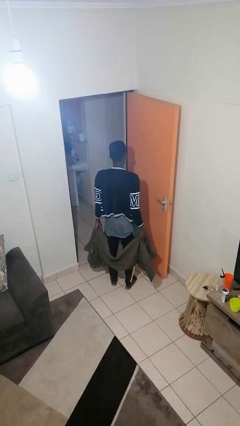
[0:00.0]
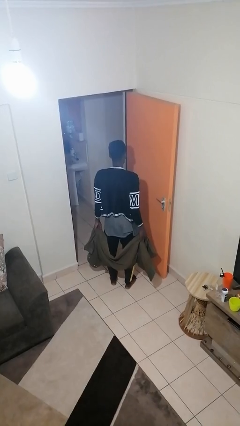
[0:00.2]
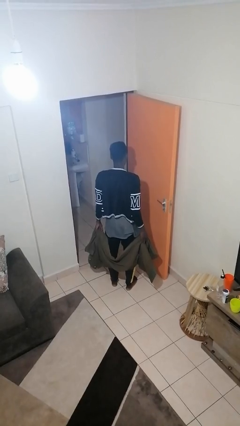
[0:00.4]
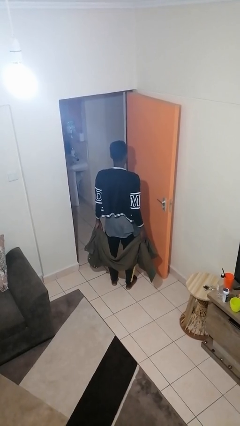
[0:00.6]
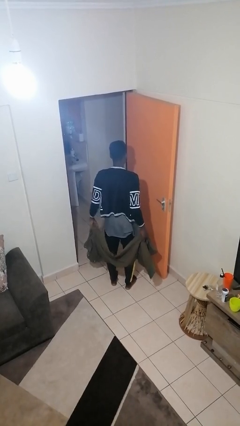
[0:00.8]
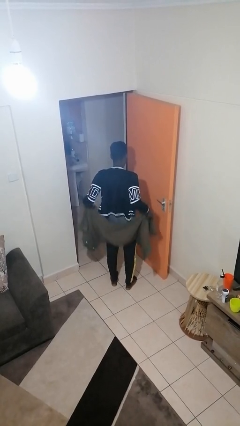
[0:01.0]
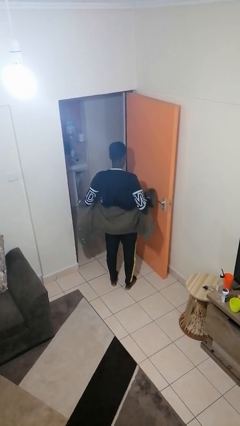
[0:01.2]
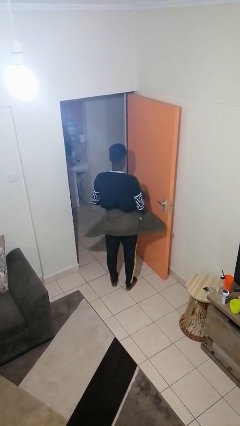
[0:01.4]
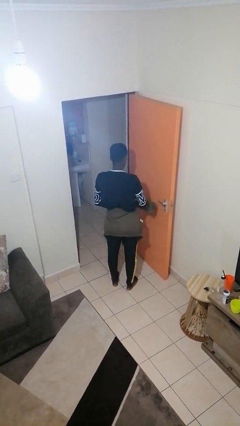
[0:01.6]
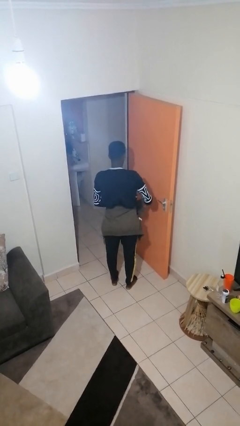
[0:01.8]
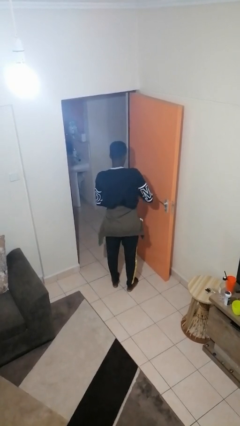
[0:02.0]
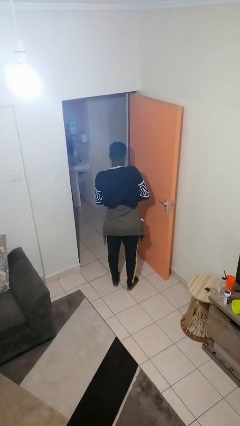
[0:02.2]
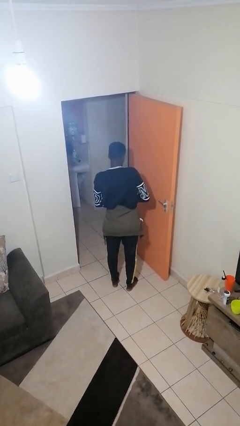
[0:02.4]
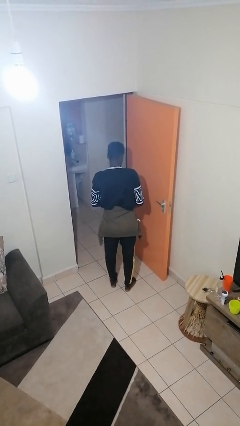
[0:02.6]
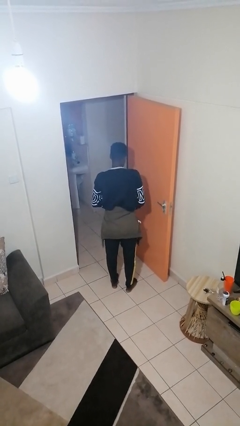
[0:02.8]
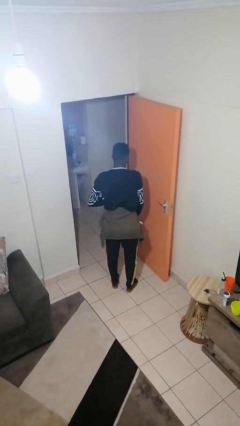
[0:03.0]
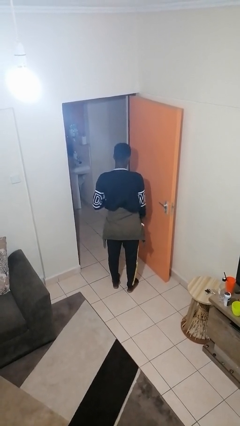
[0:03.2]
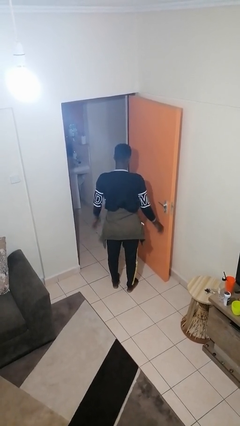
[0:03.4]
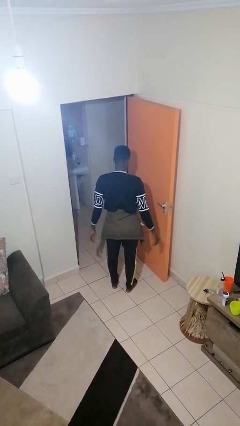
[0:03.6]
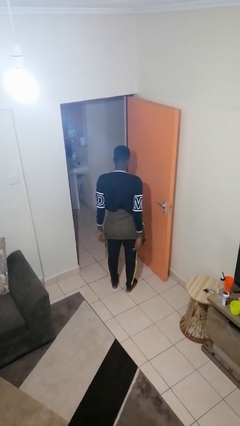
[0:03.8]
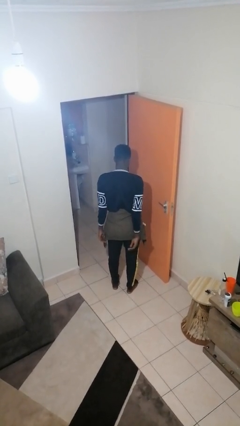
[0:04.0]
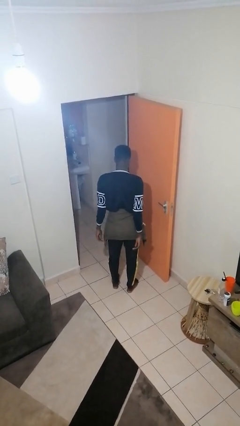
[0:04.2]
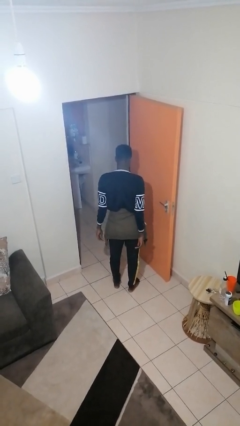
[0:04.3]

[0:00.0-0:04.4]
person ties jacket around waist

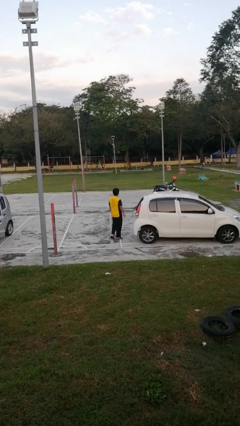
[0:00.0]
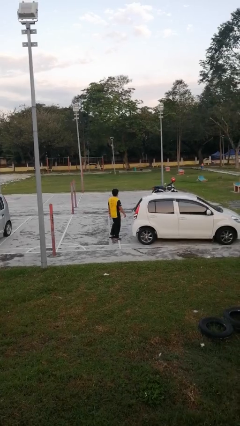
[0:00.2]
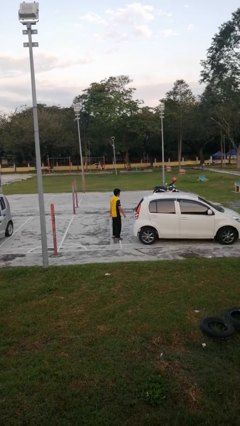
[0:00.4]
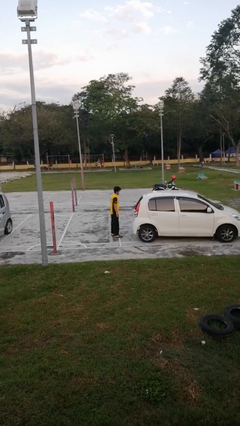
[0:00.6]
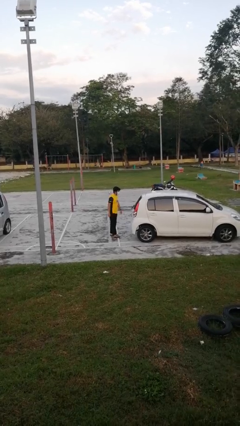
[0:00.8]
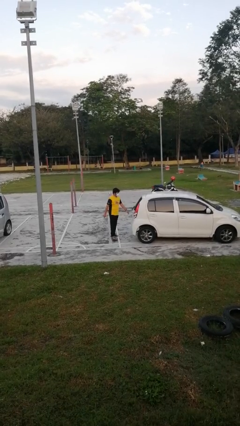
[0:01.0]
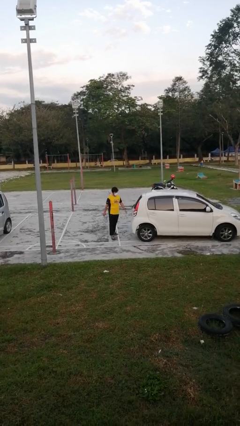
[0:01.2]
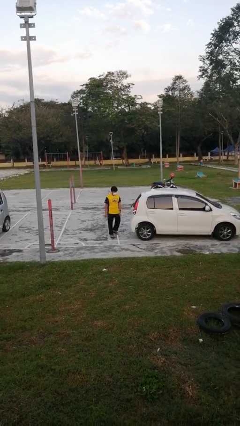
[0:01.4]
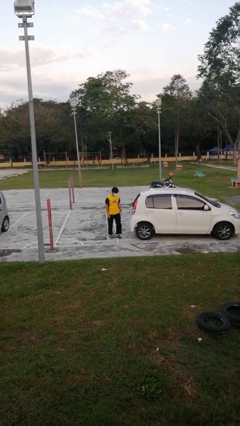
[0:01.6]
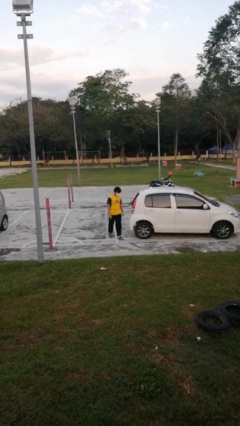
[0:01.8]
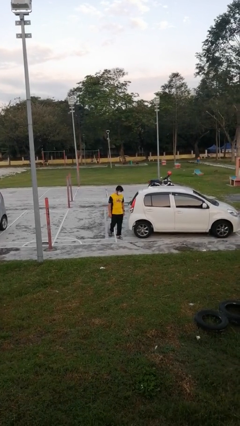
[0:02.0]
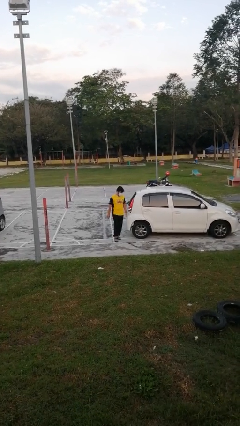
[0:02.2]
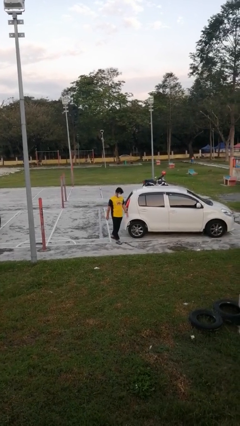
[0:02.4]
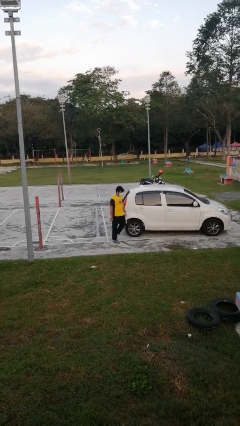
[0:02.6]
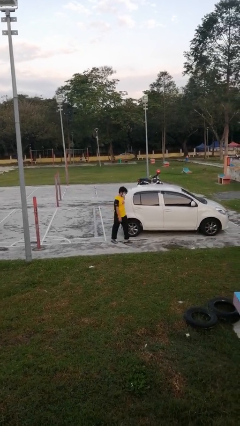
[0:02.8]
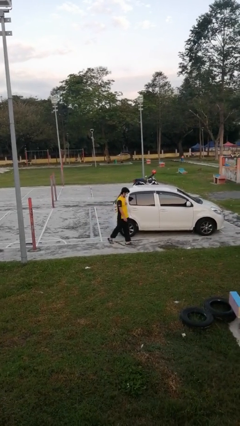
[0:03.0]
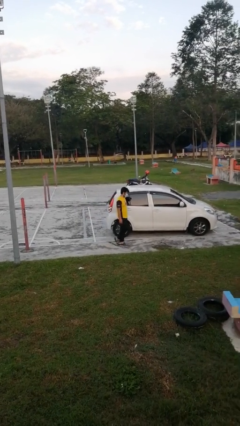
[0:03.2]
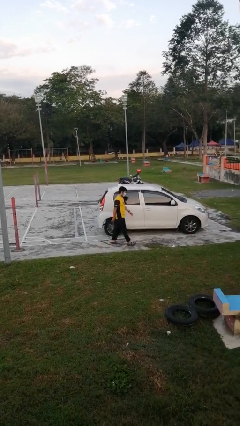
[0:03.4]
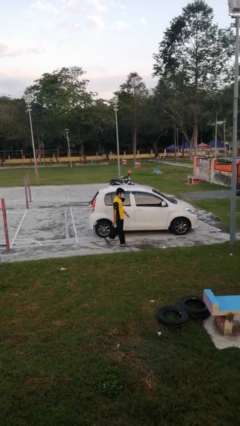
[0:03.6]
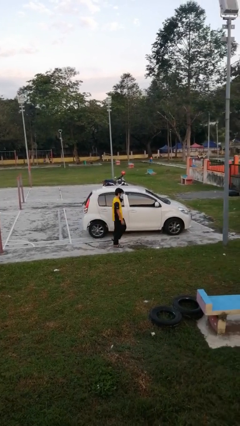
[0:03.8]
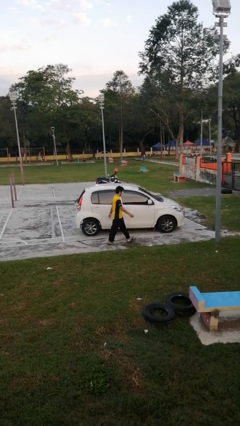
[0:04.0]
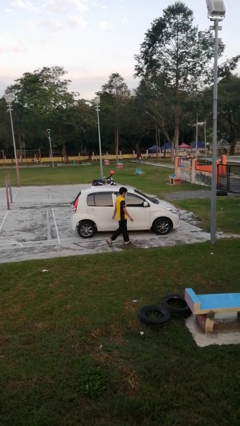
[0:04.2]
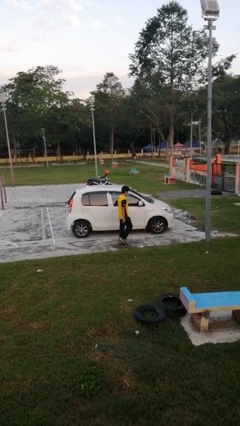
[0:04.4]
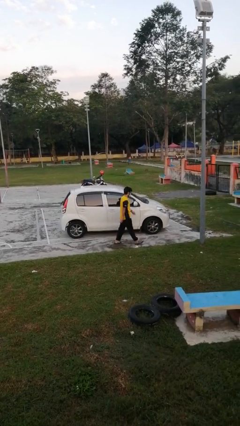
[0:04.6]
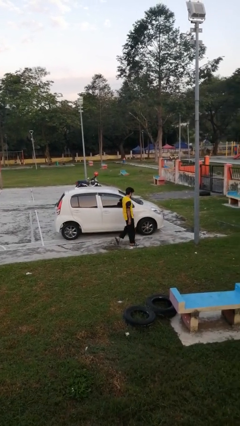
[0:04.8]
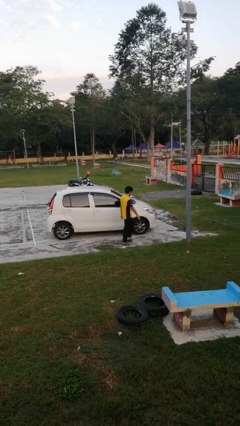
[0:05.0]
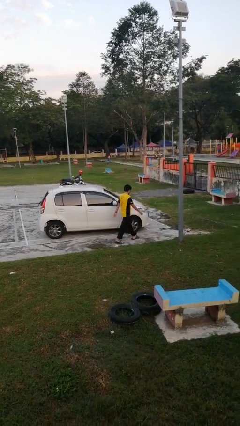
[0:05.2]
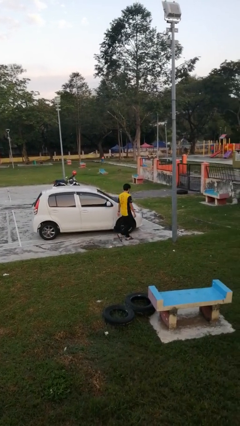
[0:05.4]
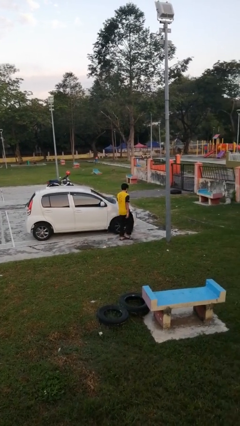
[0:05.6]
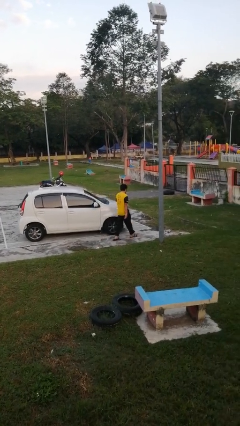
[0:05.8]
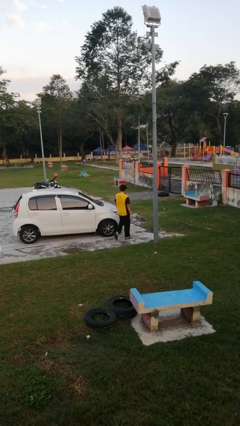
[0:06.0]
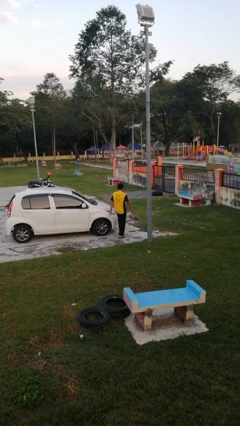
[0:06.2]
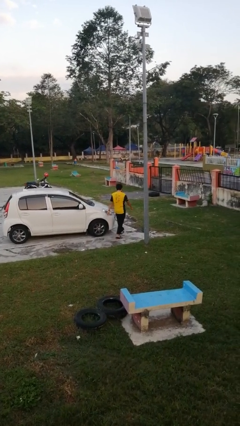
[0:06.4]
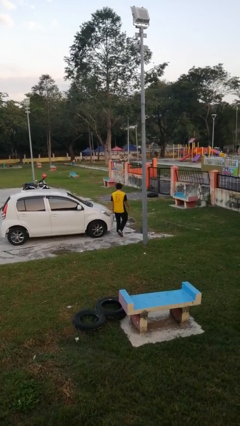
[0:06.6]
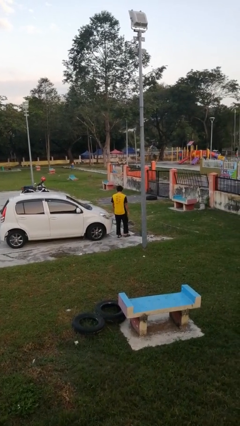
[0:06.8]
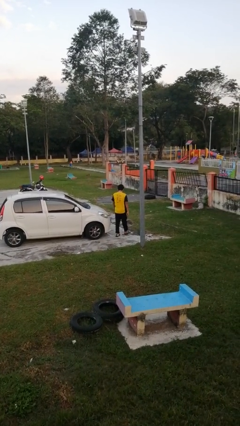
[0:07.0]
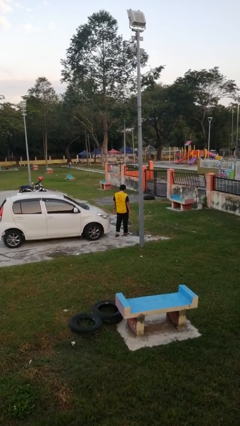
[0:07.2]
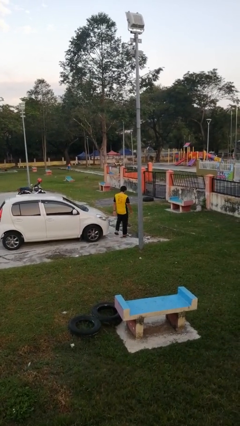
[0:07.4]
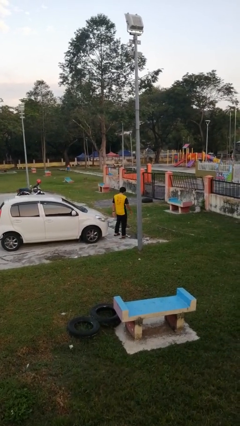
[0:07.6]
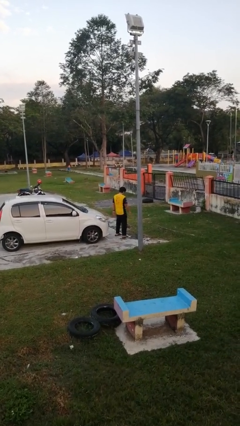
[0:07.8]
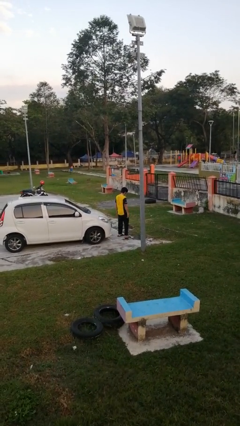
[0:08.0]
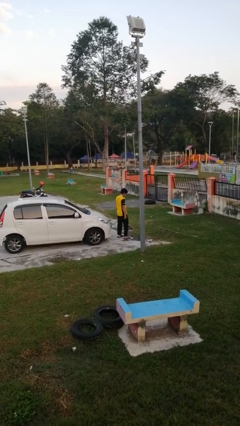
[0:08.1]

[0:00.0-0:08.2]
person walks around car

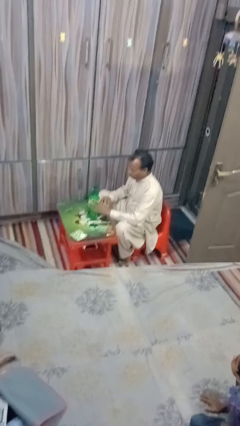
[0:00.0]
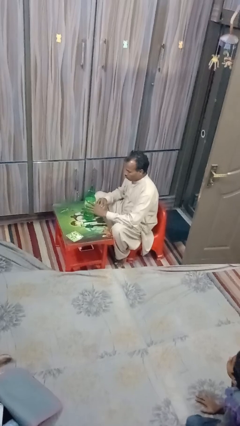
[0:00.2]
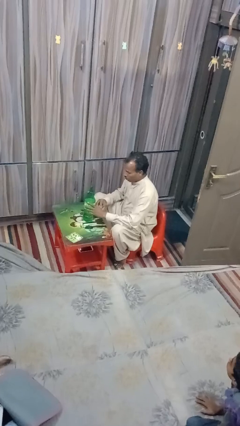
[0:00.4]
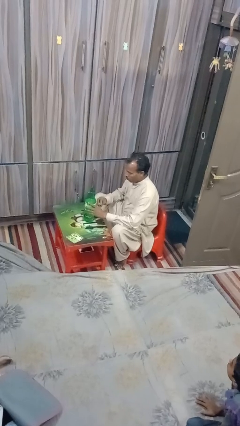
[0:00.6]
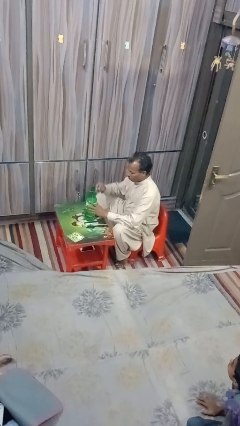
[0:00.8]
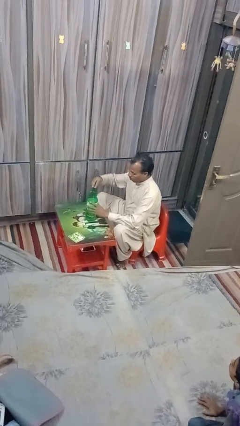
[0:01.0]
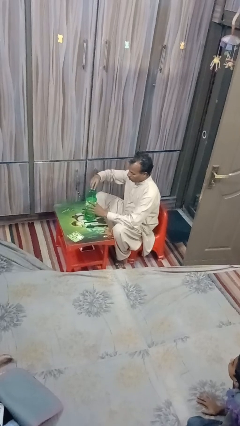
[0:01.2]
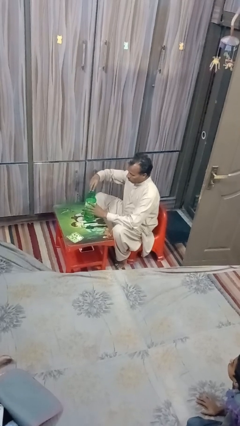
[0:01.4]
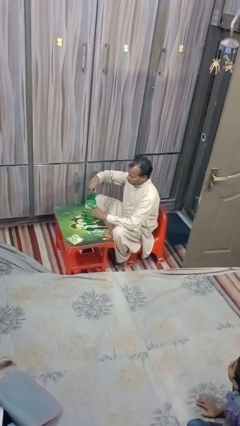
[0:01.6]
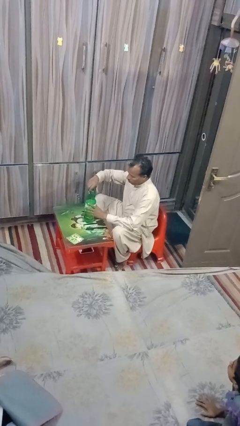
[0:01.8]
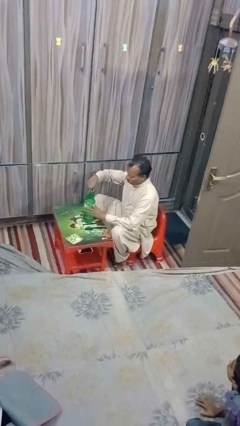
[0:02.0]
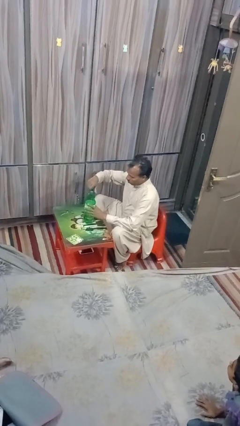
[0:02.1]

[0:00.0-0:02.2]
person screws lid to bottle

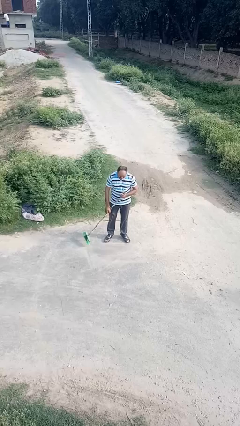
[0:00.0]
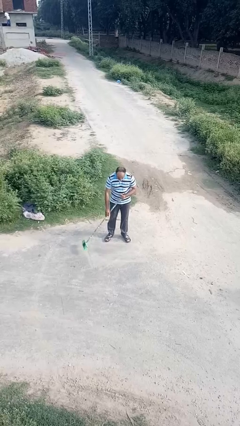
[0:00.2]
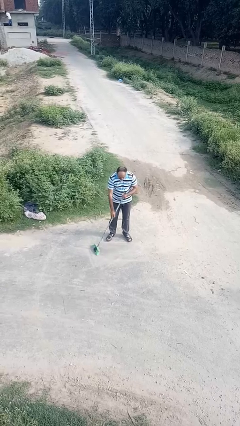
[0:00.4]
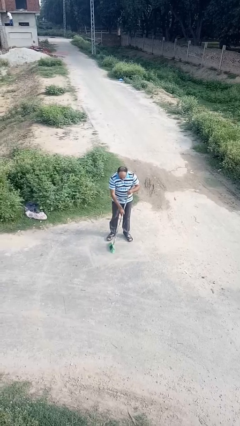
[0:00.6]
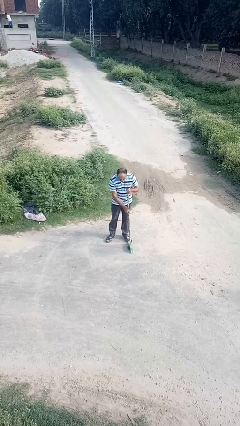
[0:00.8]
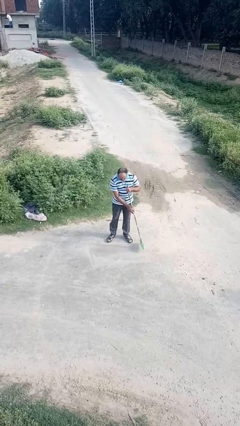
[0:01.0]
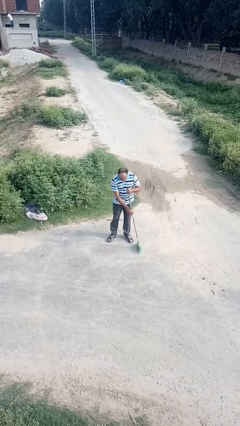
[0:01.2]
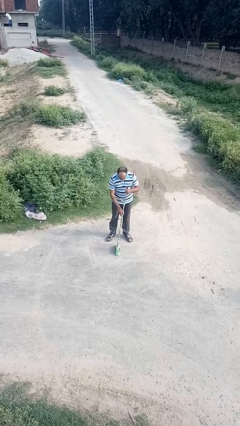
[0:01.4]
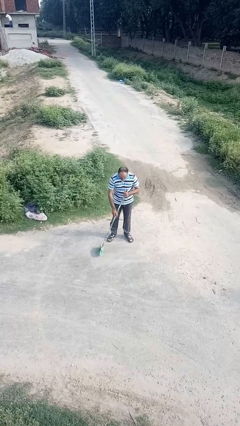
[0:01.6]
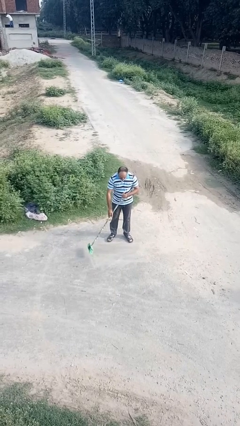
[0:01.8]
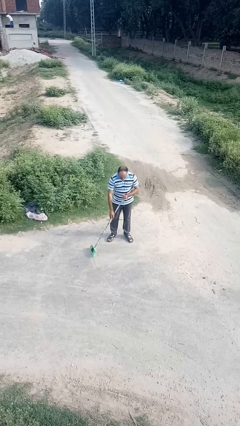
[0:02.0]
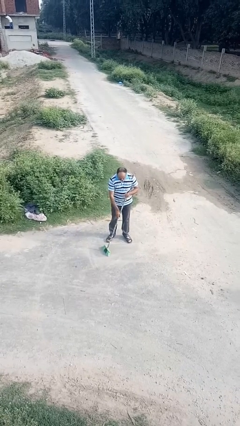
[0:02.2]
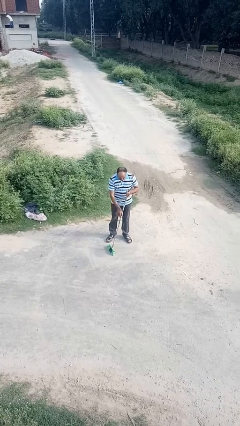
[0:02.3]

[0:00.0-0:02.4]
person sweeps floor

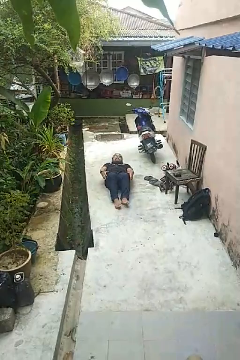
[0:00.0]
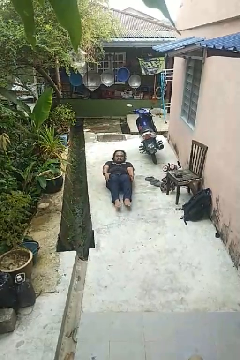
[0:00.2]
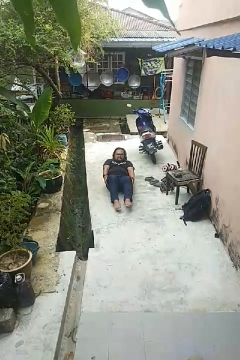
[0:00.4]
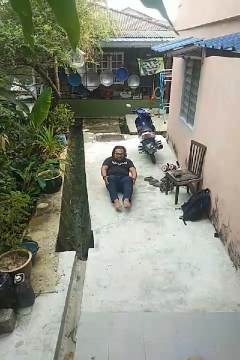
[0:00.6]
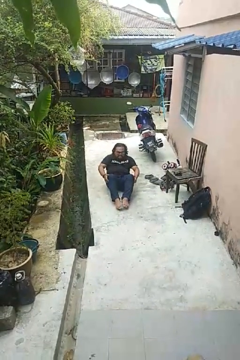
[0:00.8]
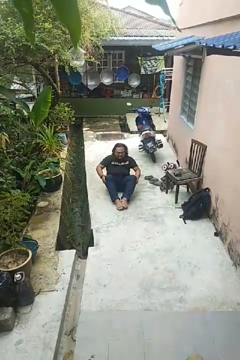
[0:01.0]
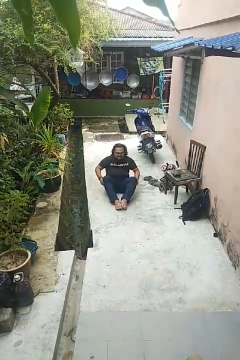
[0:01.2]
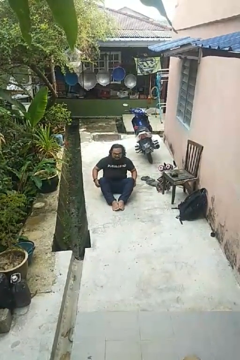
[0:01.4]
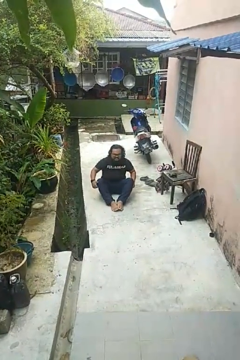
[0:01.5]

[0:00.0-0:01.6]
person exercises with situp
